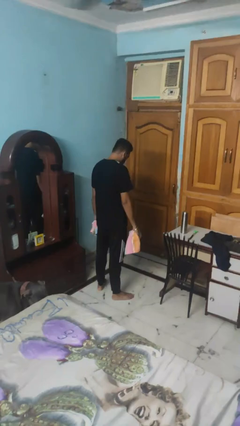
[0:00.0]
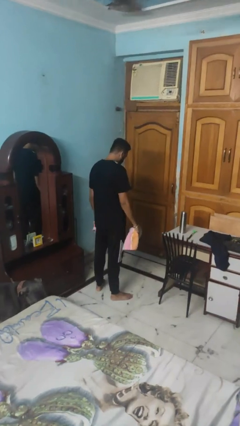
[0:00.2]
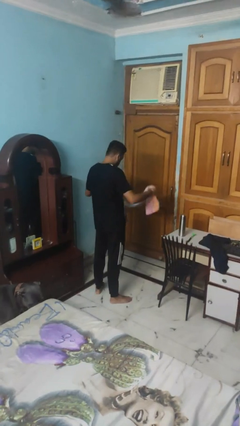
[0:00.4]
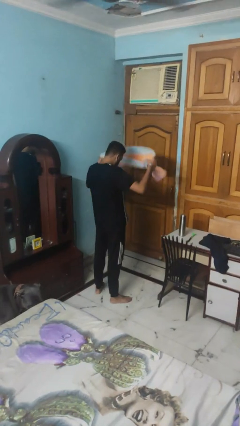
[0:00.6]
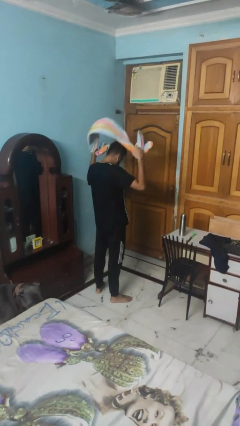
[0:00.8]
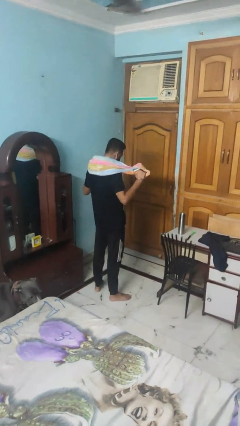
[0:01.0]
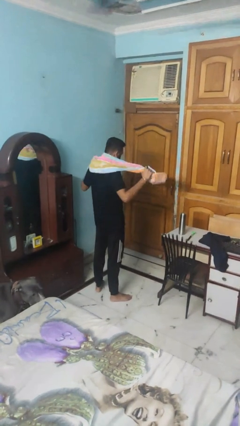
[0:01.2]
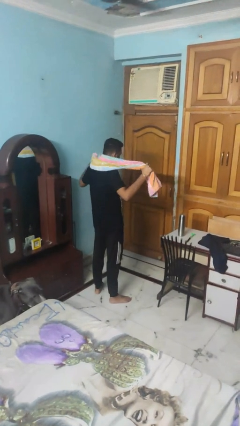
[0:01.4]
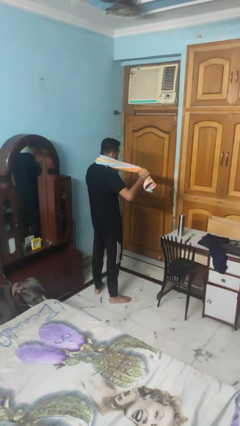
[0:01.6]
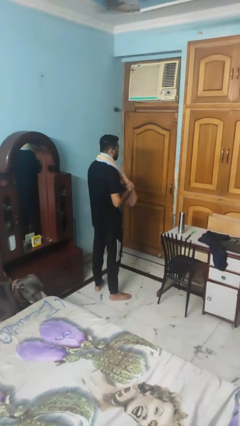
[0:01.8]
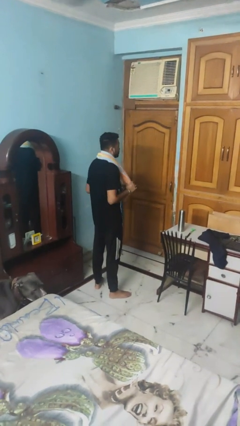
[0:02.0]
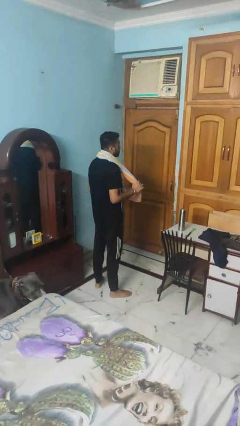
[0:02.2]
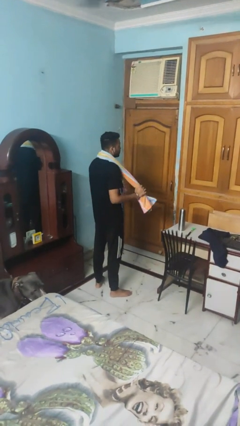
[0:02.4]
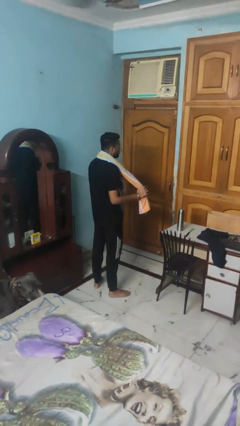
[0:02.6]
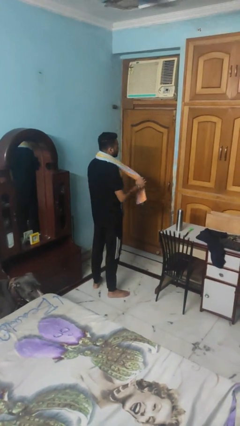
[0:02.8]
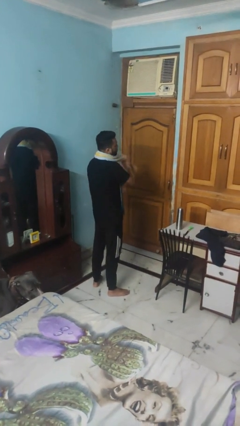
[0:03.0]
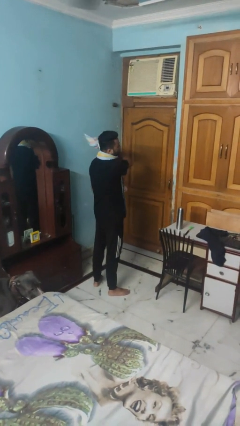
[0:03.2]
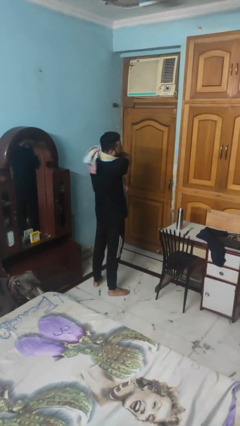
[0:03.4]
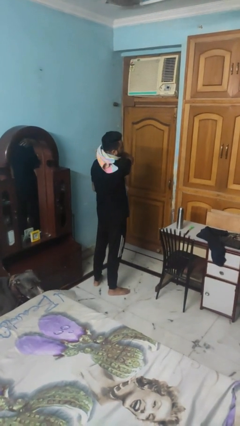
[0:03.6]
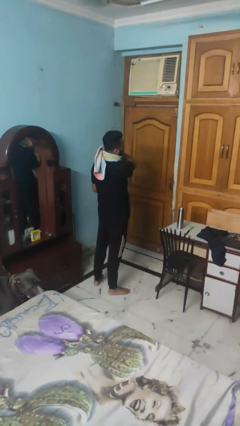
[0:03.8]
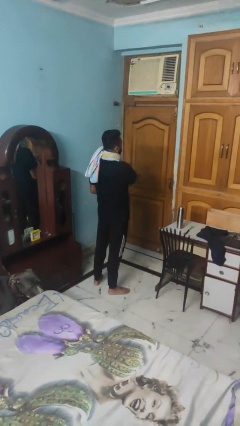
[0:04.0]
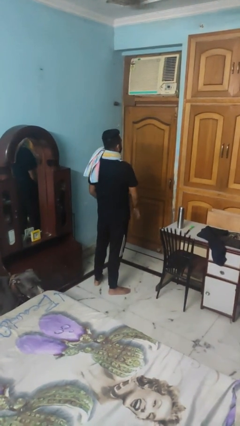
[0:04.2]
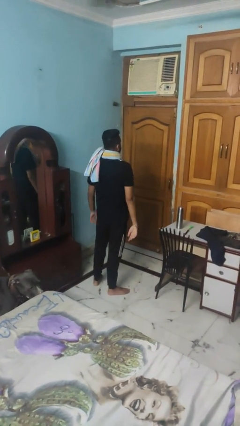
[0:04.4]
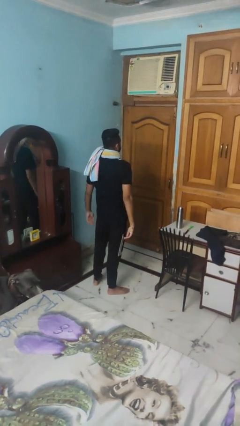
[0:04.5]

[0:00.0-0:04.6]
person puts on scarf

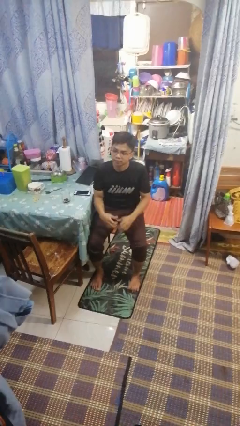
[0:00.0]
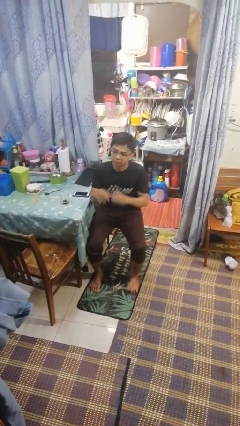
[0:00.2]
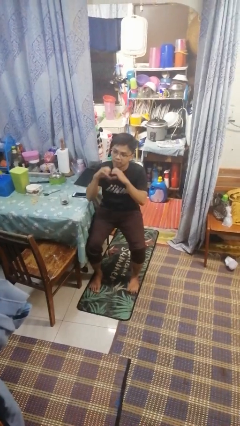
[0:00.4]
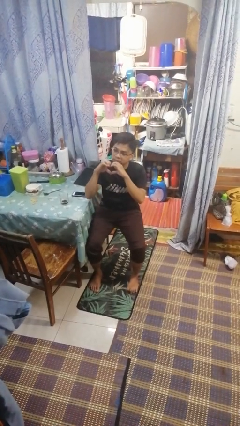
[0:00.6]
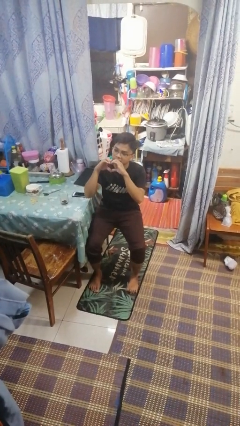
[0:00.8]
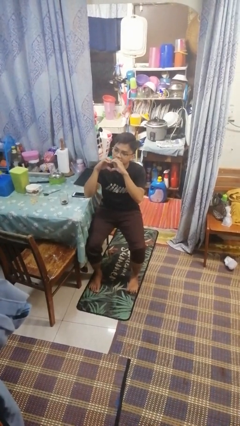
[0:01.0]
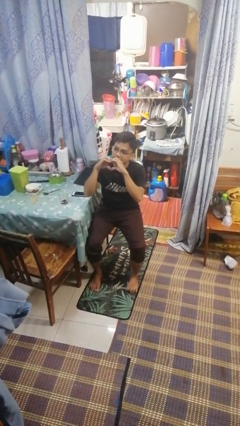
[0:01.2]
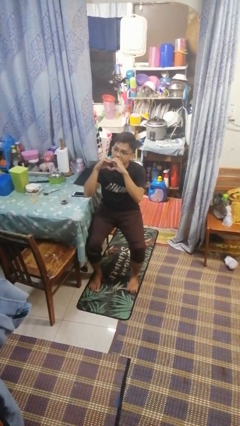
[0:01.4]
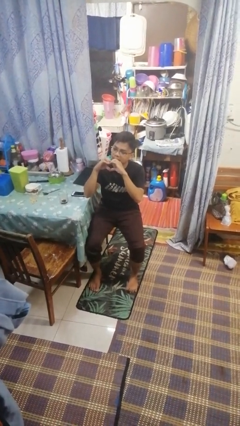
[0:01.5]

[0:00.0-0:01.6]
person gestures heart

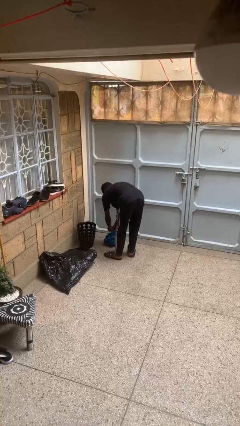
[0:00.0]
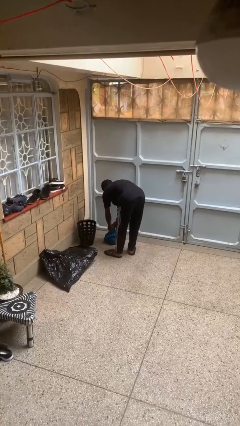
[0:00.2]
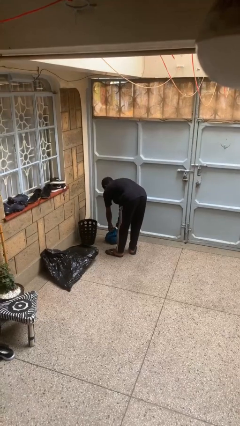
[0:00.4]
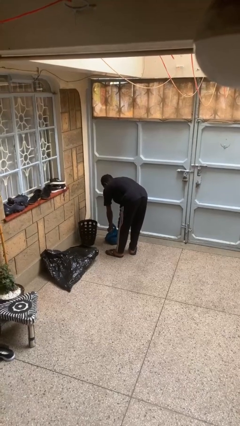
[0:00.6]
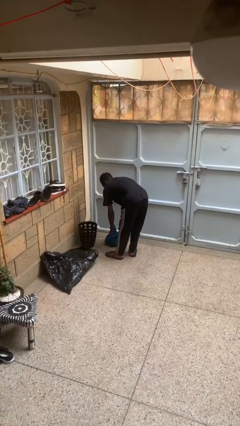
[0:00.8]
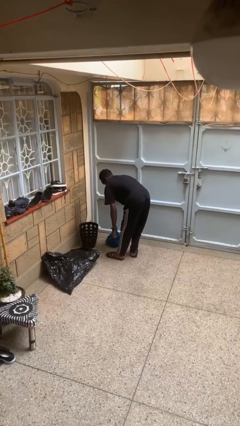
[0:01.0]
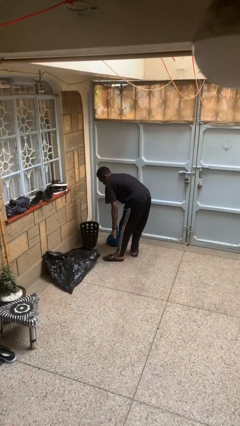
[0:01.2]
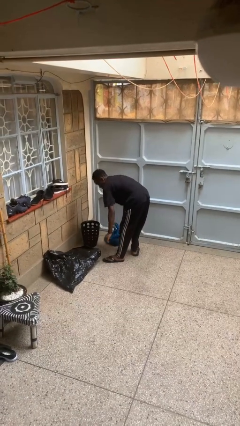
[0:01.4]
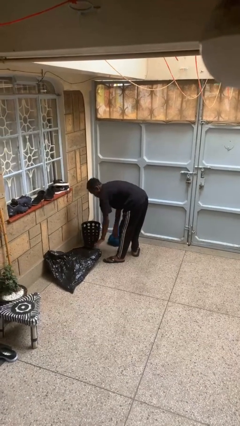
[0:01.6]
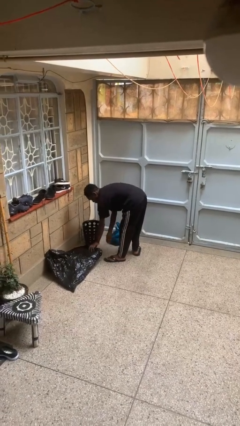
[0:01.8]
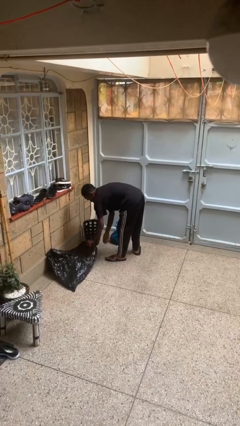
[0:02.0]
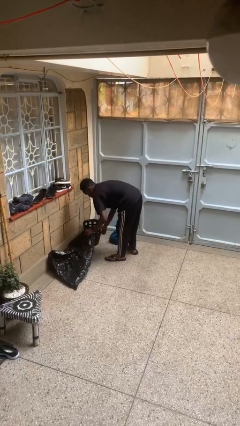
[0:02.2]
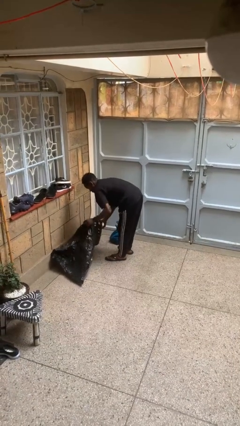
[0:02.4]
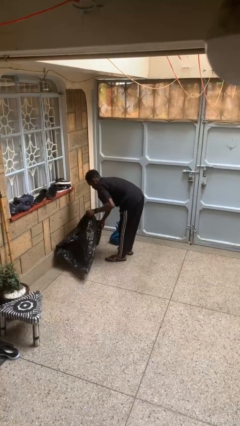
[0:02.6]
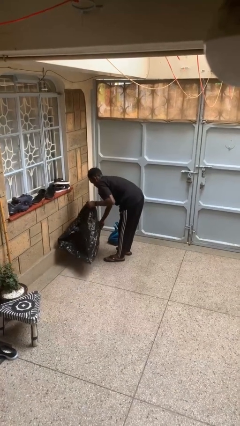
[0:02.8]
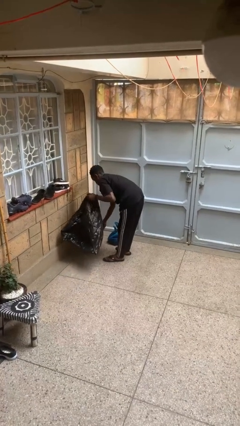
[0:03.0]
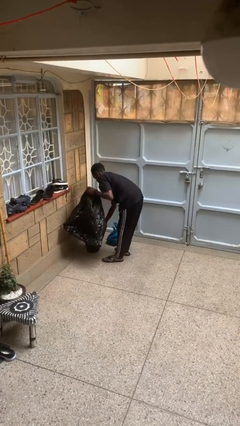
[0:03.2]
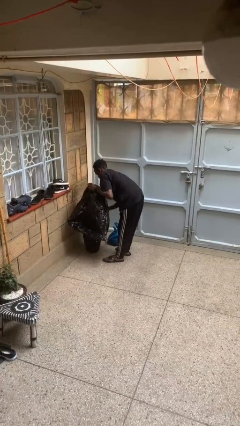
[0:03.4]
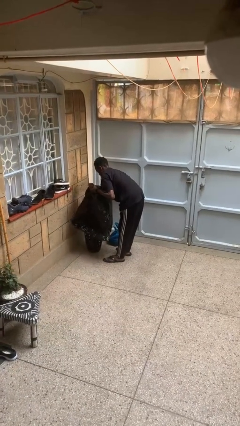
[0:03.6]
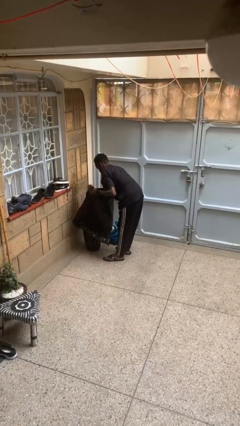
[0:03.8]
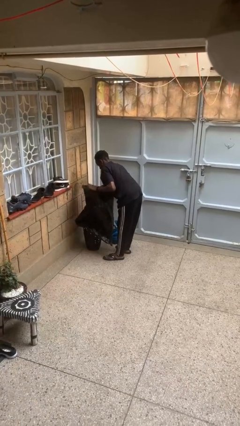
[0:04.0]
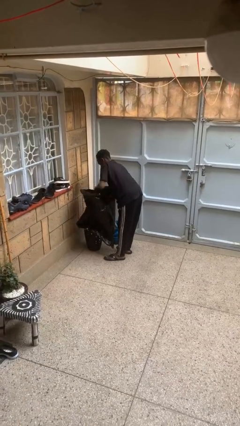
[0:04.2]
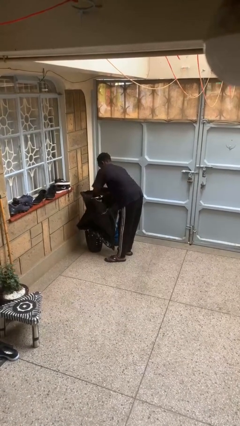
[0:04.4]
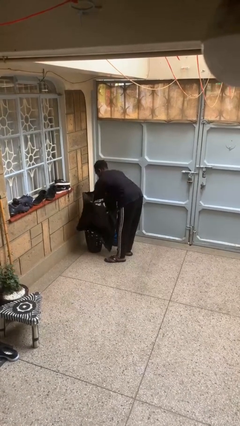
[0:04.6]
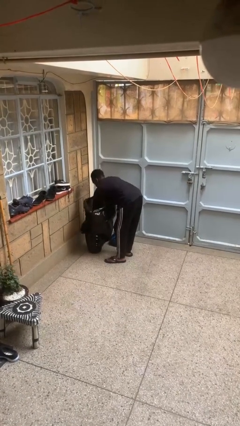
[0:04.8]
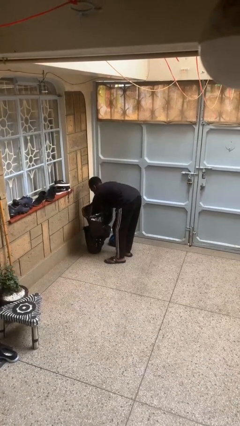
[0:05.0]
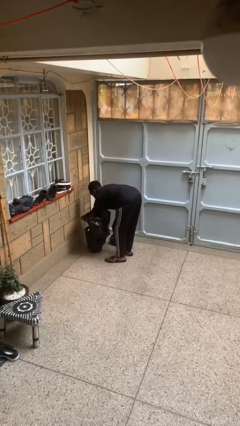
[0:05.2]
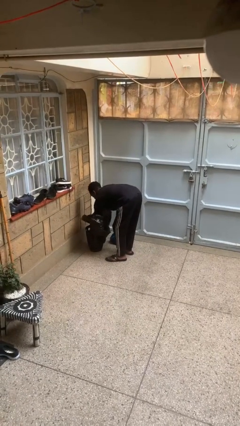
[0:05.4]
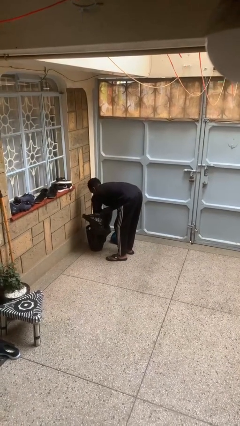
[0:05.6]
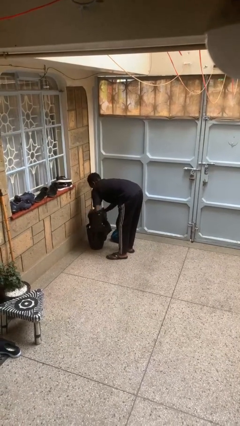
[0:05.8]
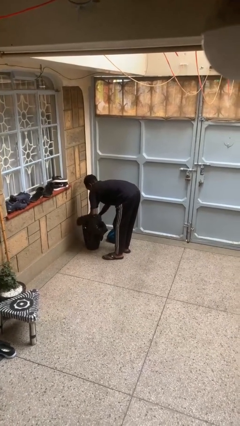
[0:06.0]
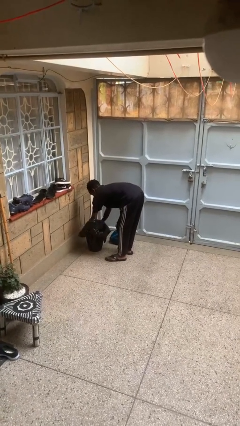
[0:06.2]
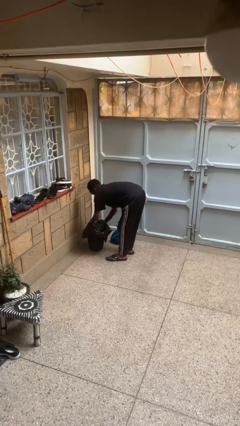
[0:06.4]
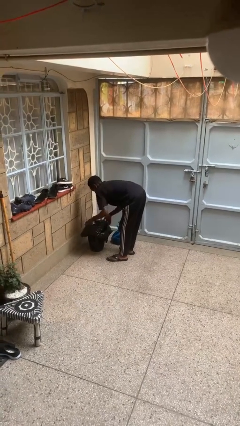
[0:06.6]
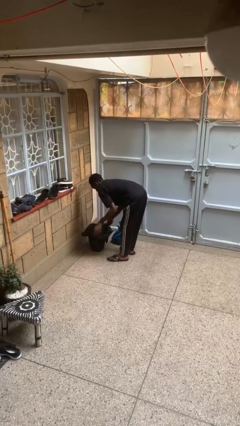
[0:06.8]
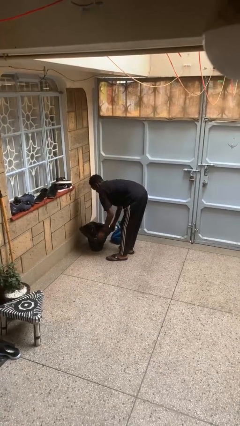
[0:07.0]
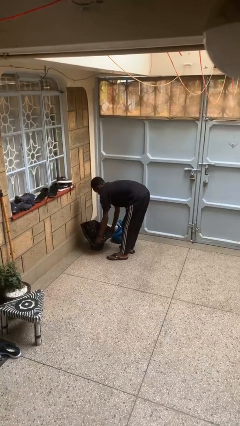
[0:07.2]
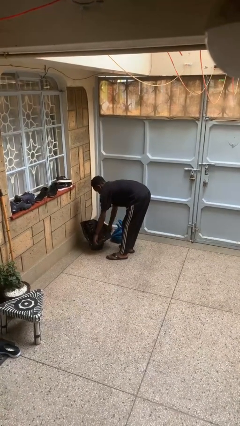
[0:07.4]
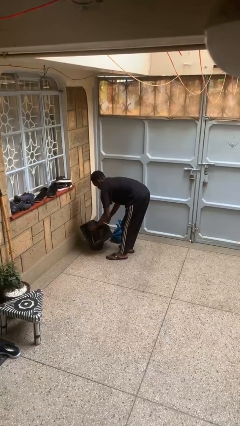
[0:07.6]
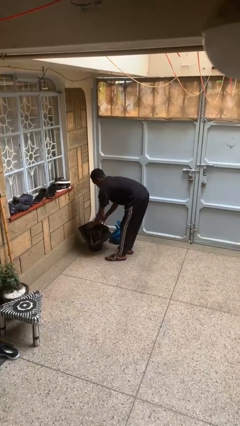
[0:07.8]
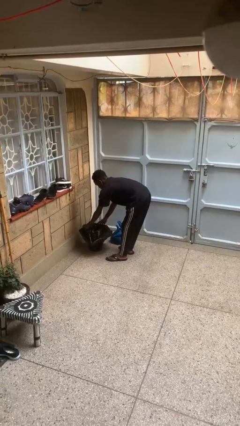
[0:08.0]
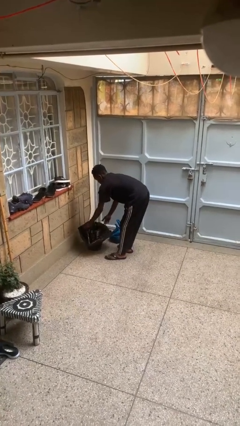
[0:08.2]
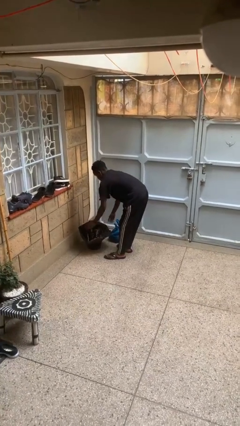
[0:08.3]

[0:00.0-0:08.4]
person inserts trashbag into trashcan

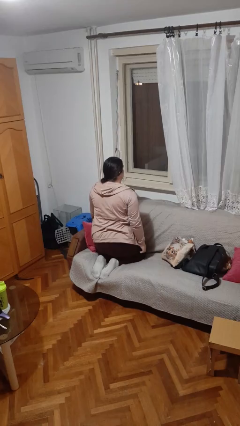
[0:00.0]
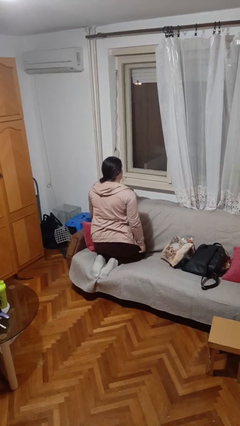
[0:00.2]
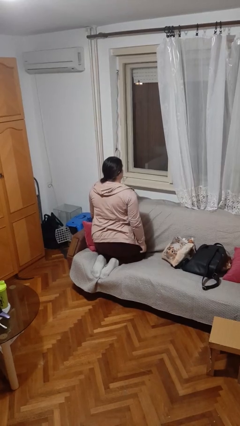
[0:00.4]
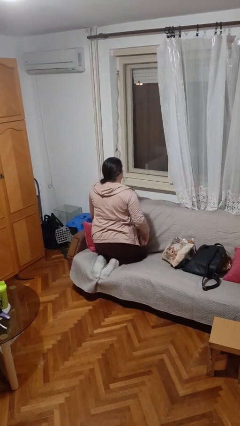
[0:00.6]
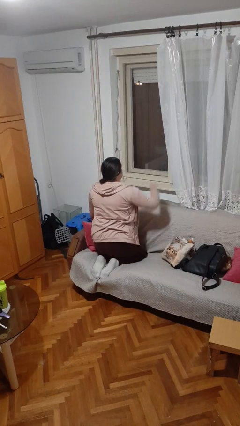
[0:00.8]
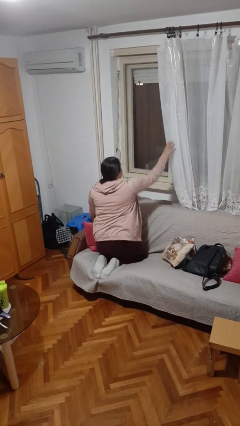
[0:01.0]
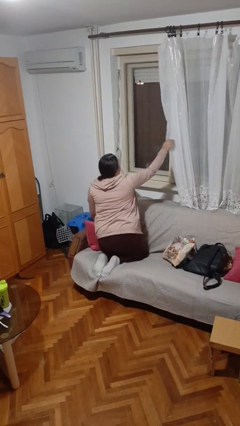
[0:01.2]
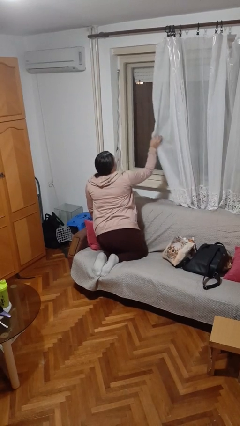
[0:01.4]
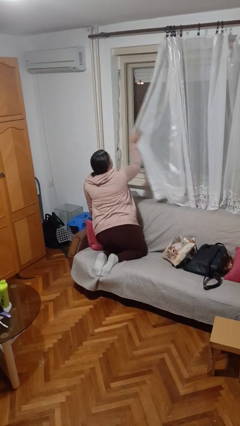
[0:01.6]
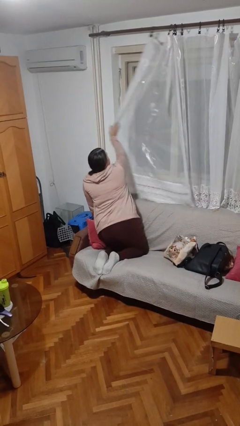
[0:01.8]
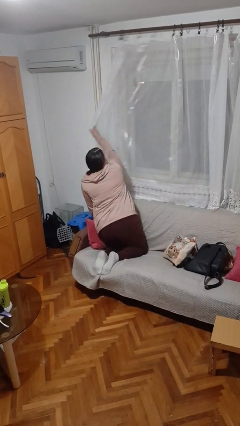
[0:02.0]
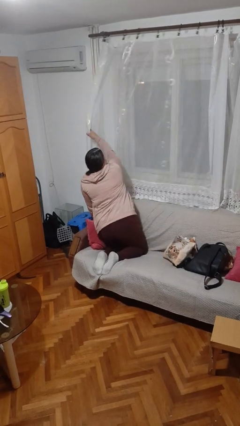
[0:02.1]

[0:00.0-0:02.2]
person closes curtains

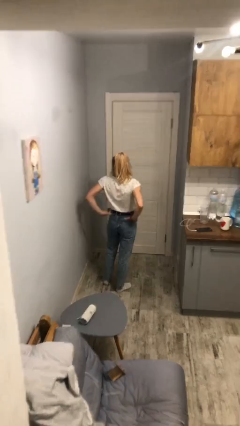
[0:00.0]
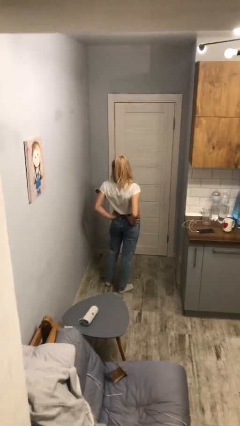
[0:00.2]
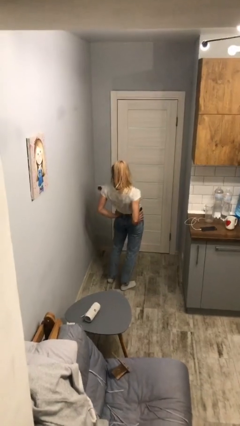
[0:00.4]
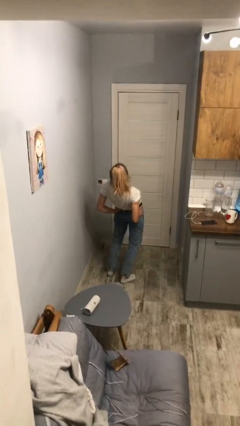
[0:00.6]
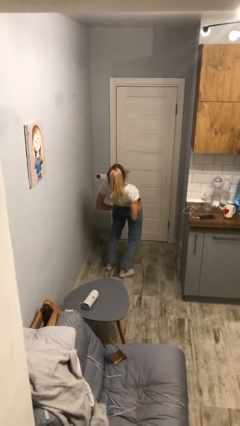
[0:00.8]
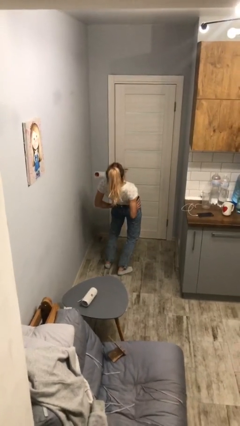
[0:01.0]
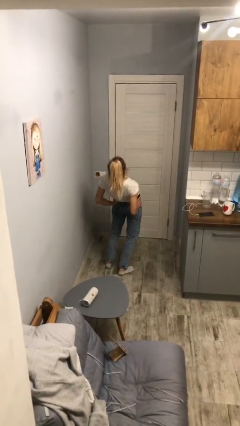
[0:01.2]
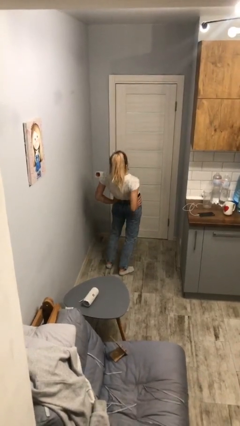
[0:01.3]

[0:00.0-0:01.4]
person stretches back
